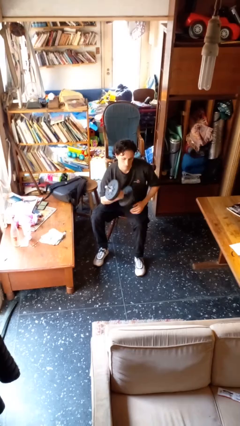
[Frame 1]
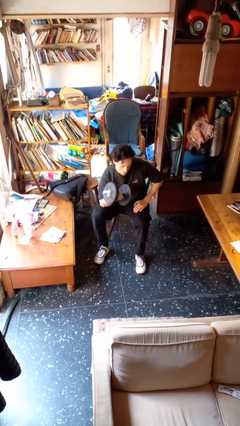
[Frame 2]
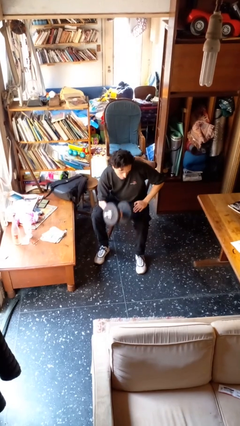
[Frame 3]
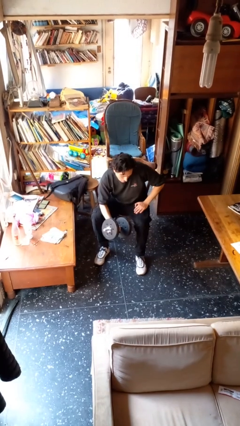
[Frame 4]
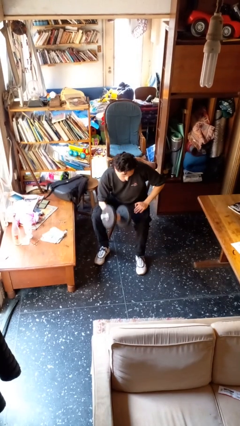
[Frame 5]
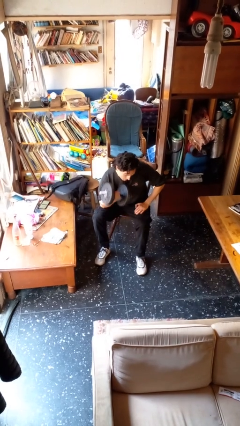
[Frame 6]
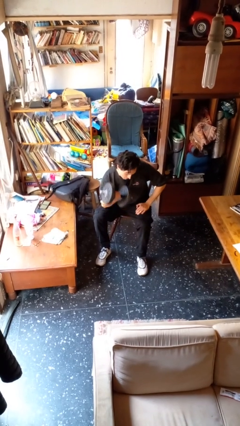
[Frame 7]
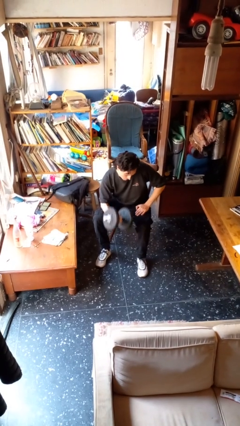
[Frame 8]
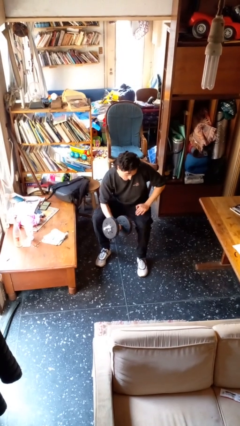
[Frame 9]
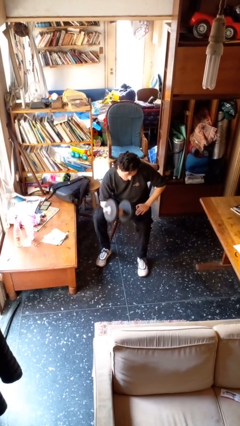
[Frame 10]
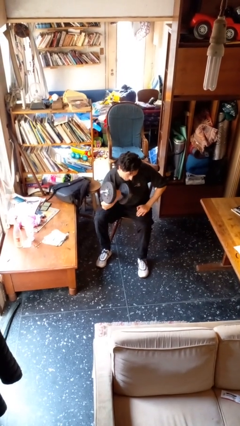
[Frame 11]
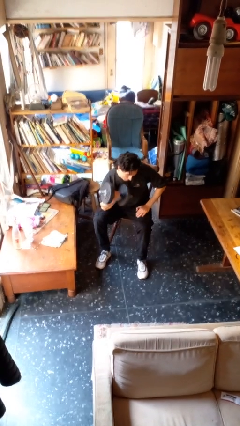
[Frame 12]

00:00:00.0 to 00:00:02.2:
person lifts dumbbells

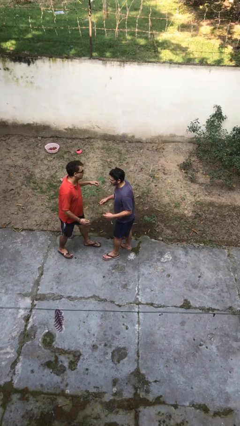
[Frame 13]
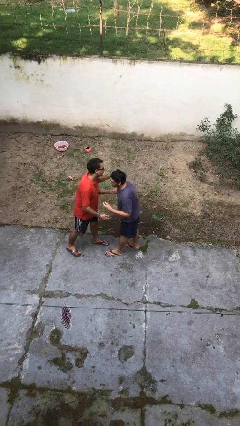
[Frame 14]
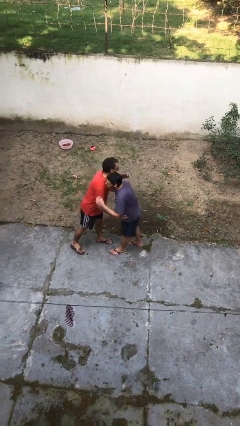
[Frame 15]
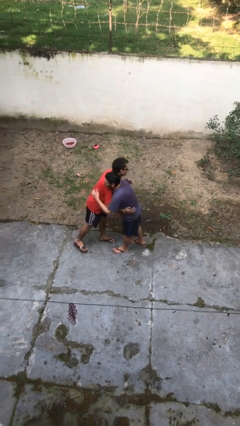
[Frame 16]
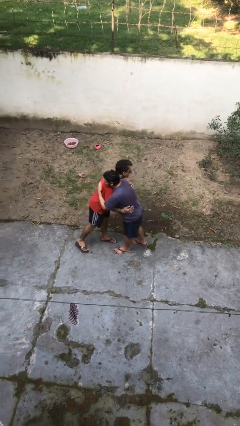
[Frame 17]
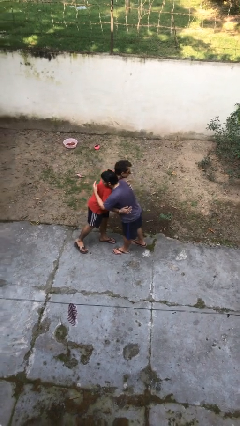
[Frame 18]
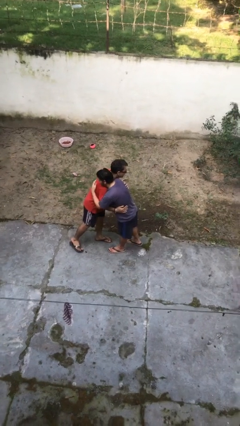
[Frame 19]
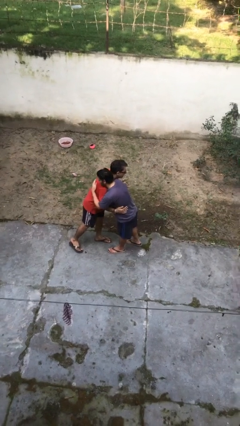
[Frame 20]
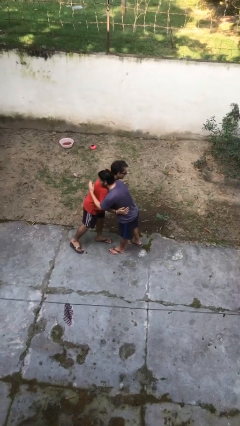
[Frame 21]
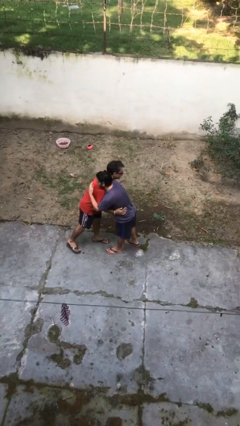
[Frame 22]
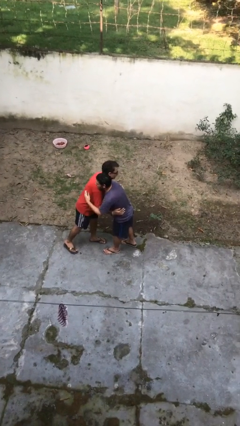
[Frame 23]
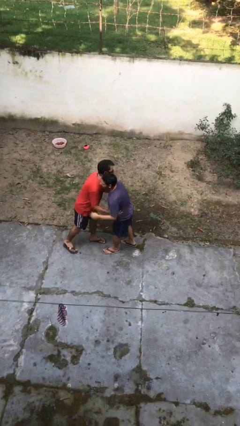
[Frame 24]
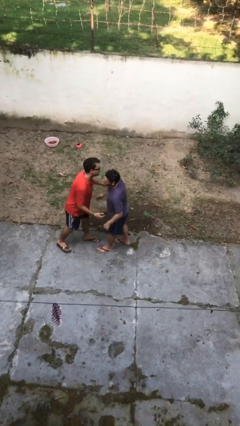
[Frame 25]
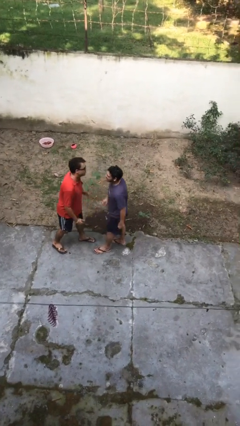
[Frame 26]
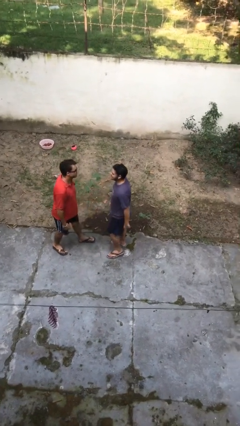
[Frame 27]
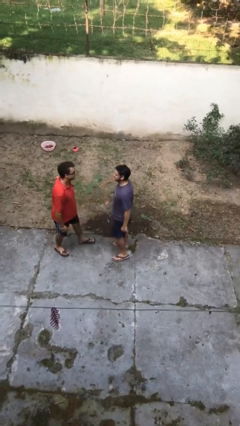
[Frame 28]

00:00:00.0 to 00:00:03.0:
person embraces person

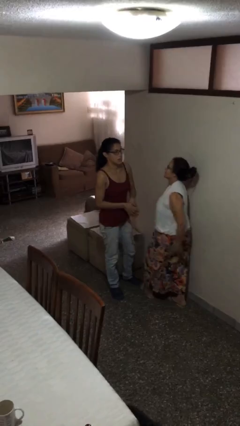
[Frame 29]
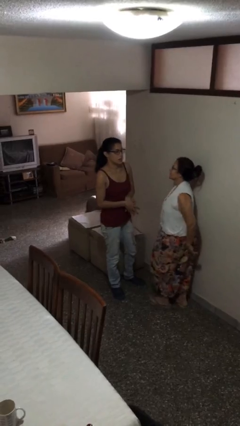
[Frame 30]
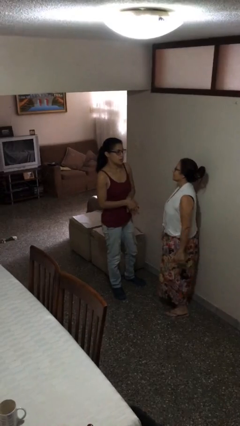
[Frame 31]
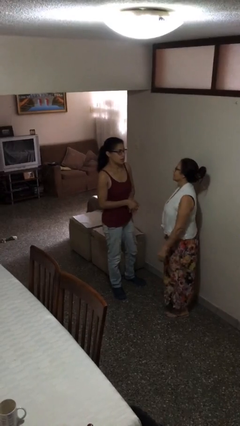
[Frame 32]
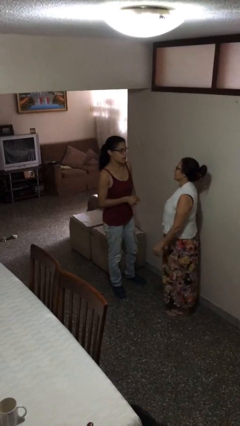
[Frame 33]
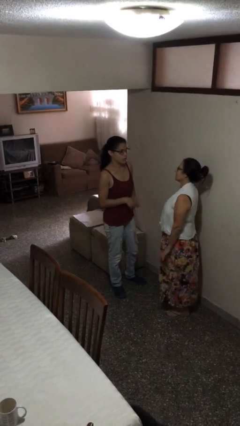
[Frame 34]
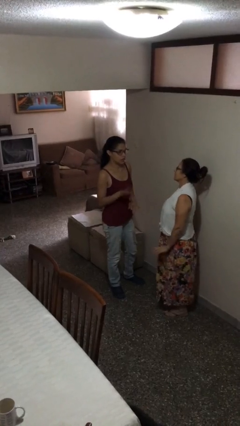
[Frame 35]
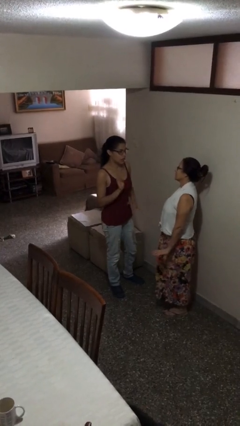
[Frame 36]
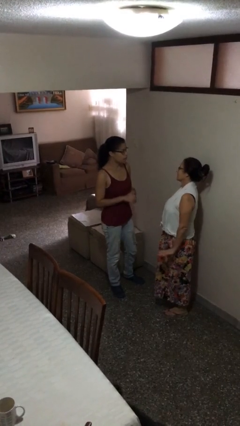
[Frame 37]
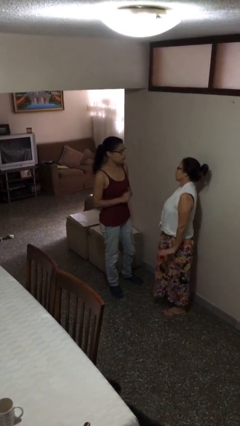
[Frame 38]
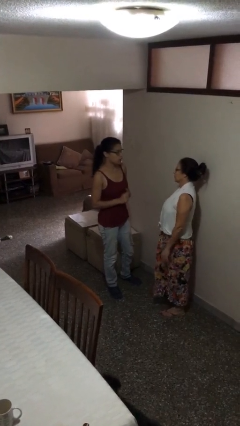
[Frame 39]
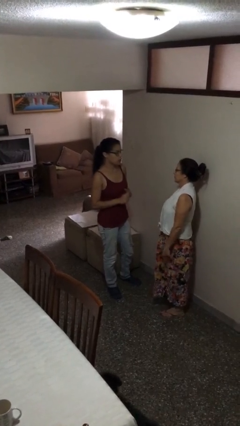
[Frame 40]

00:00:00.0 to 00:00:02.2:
person talks to person

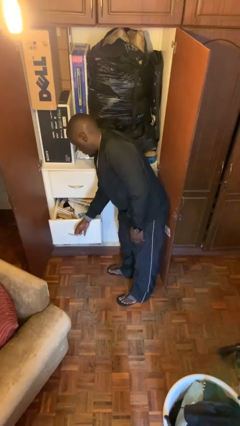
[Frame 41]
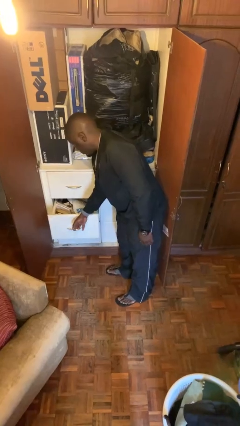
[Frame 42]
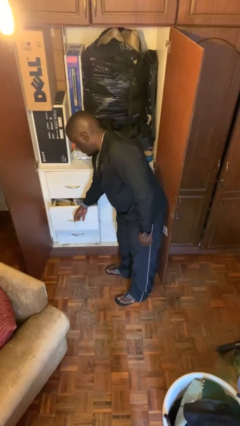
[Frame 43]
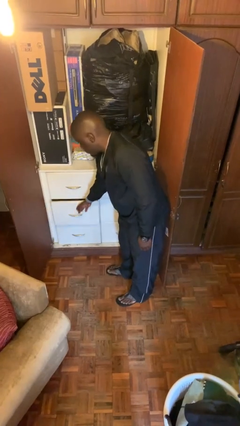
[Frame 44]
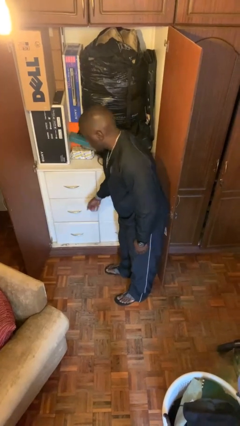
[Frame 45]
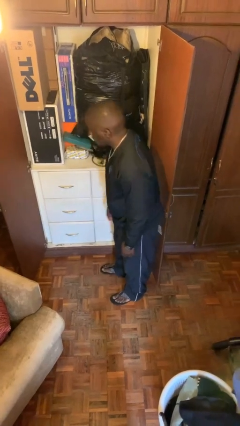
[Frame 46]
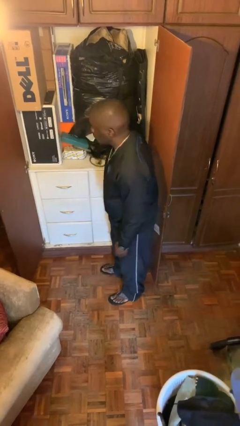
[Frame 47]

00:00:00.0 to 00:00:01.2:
person closes dresser drawer

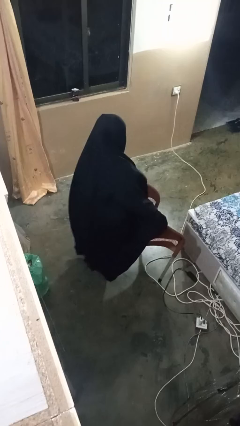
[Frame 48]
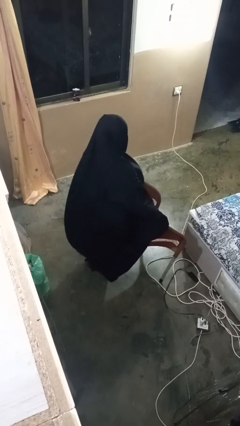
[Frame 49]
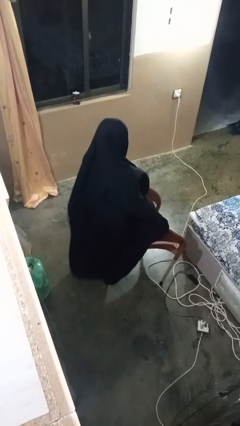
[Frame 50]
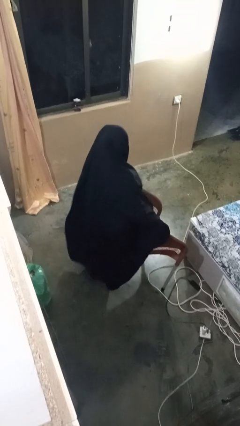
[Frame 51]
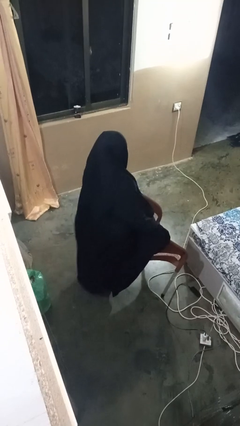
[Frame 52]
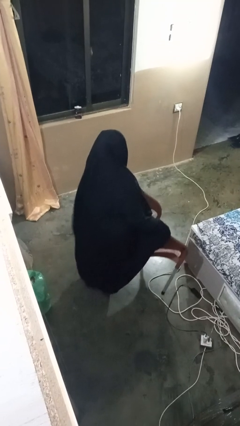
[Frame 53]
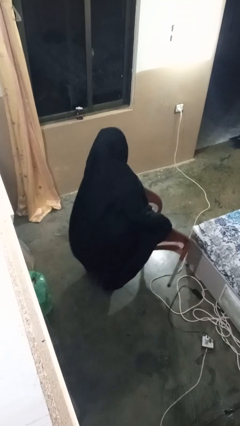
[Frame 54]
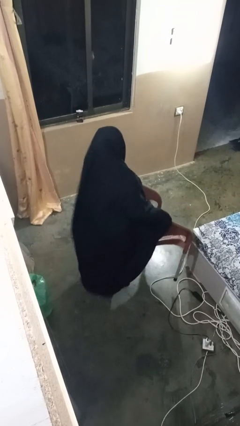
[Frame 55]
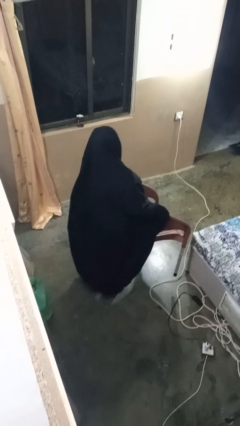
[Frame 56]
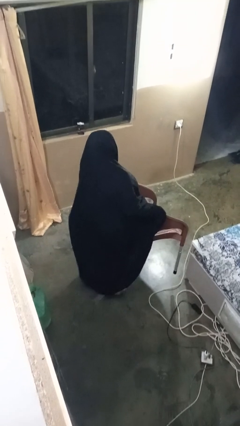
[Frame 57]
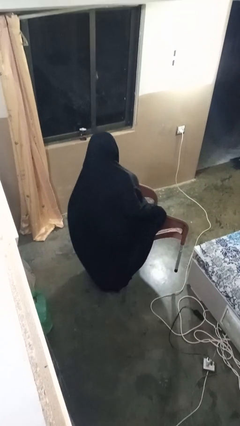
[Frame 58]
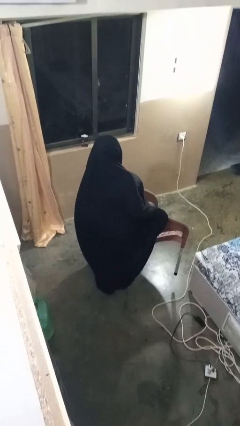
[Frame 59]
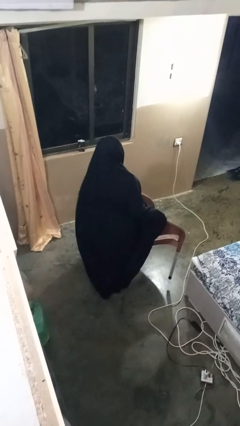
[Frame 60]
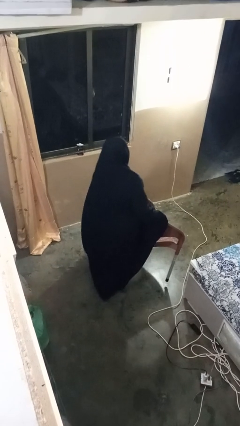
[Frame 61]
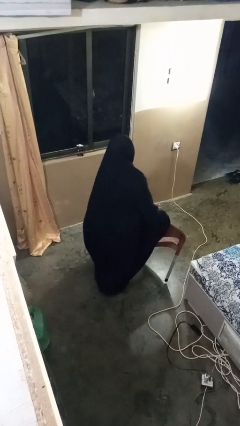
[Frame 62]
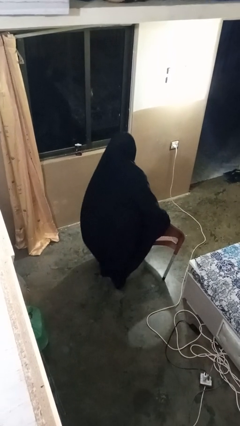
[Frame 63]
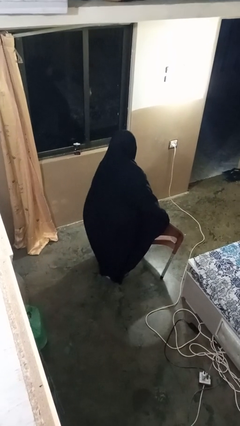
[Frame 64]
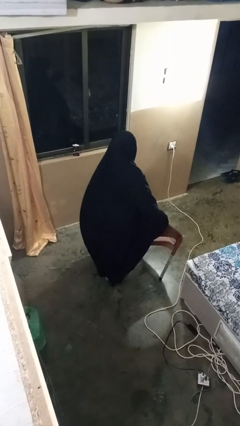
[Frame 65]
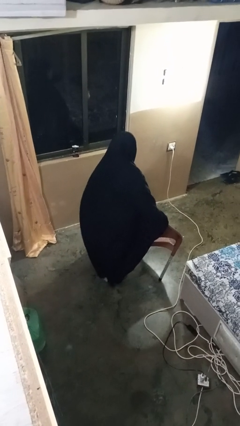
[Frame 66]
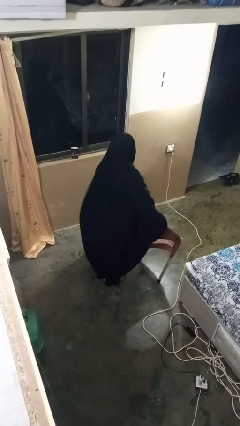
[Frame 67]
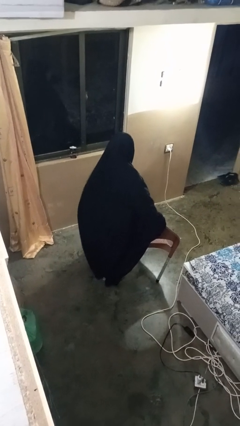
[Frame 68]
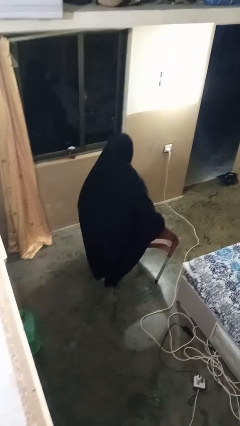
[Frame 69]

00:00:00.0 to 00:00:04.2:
person carries furniture

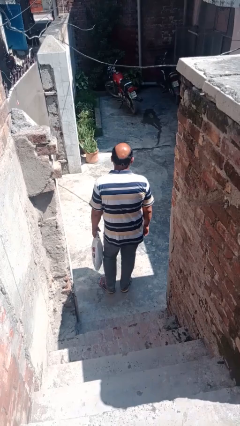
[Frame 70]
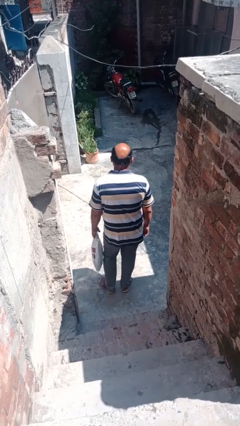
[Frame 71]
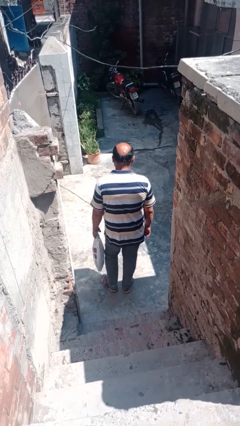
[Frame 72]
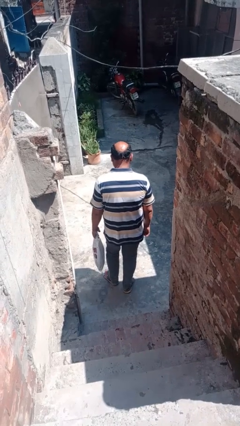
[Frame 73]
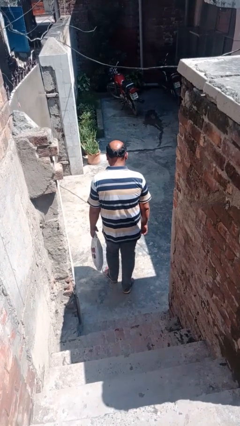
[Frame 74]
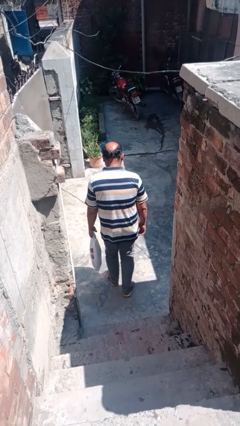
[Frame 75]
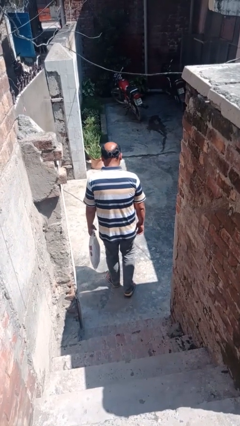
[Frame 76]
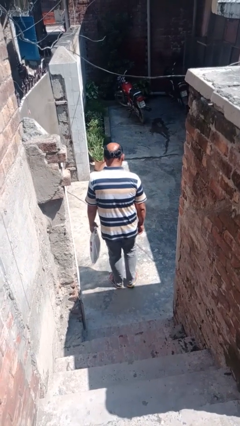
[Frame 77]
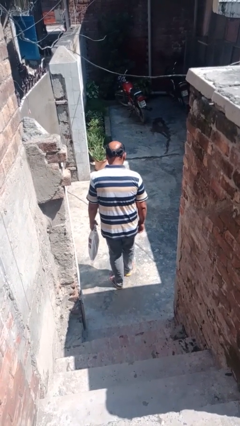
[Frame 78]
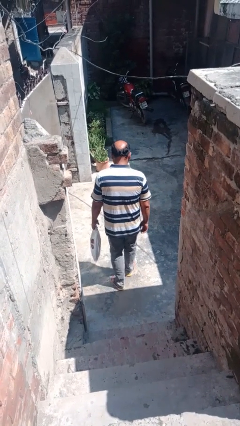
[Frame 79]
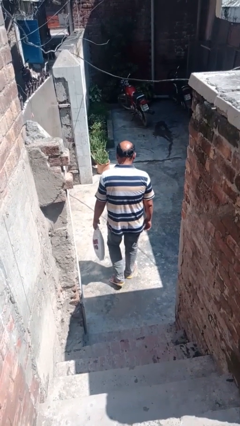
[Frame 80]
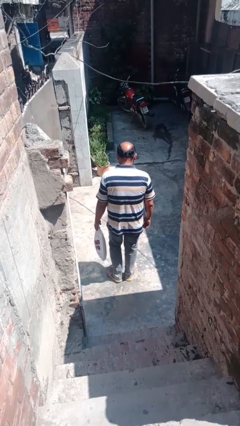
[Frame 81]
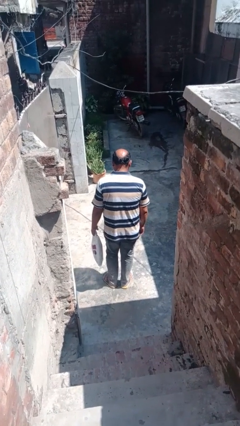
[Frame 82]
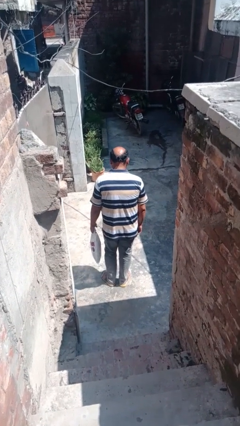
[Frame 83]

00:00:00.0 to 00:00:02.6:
person carries groceries

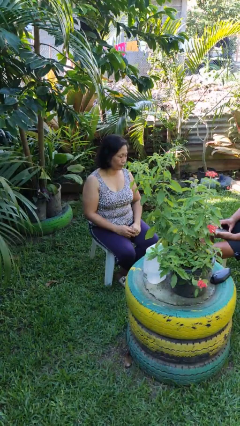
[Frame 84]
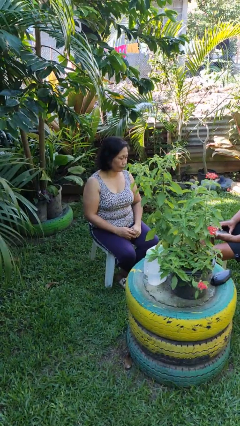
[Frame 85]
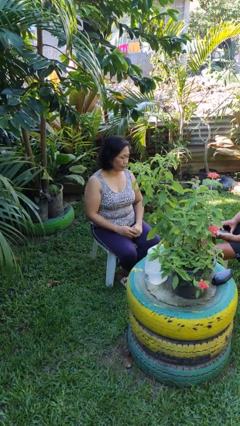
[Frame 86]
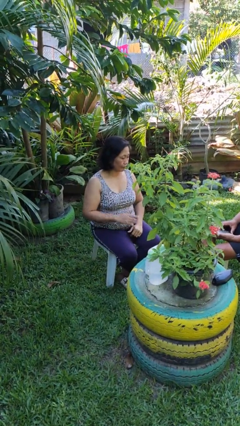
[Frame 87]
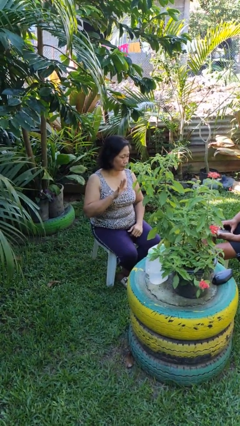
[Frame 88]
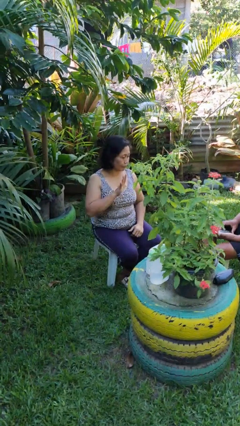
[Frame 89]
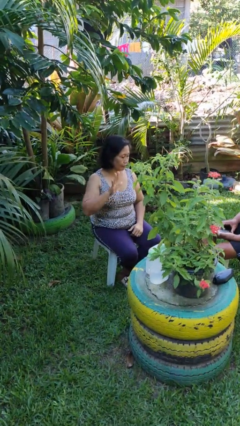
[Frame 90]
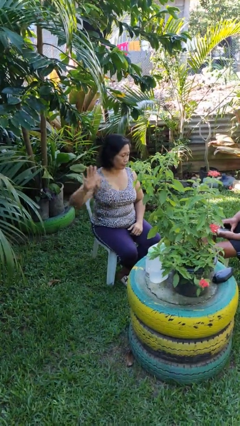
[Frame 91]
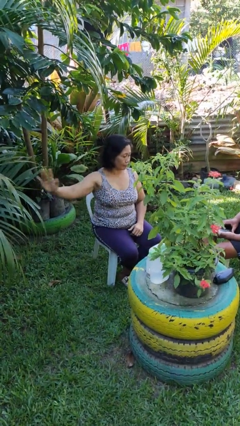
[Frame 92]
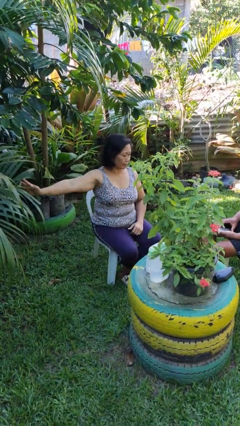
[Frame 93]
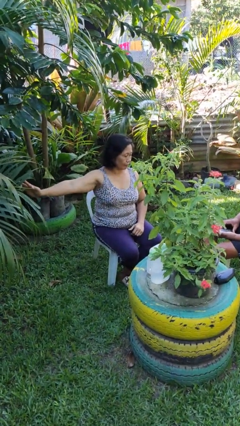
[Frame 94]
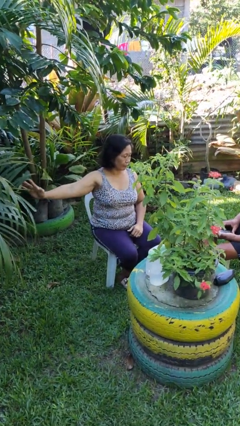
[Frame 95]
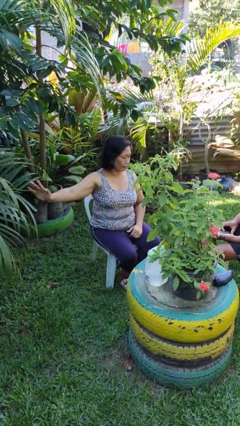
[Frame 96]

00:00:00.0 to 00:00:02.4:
person gestures swipe right
